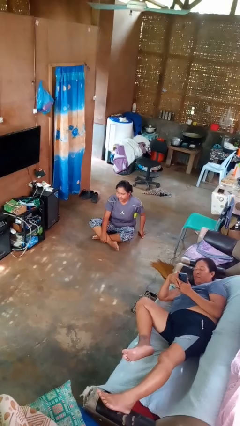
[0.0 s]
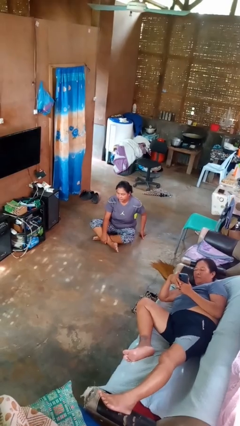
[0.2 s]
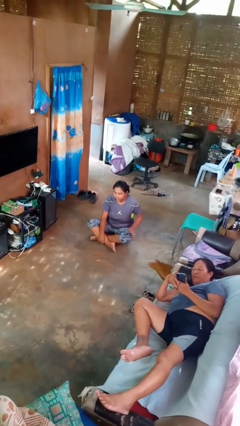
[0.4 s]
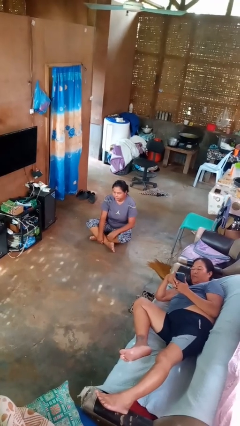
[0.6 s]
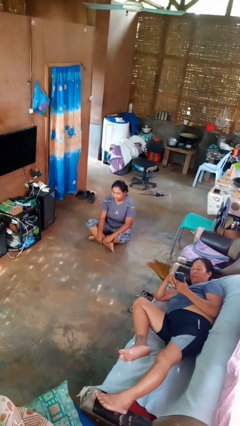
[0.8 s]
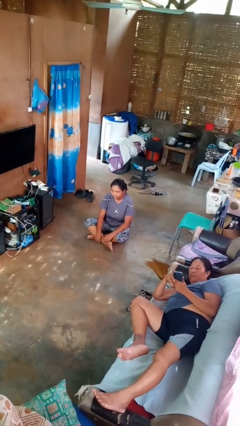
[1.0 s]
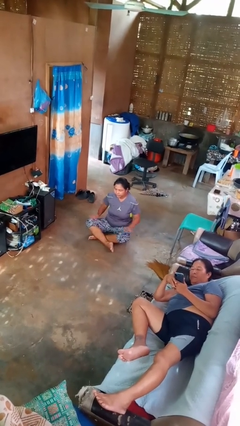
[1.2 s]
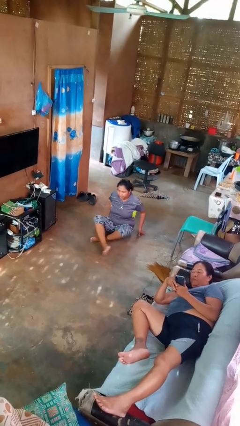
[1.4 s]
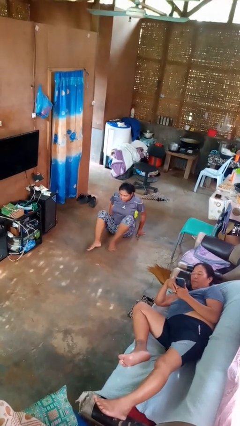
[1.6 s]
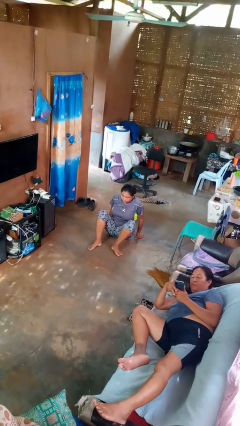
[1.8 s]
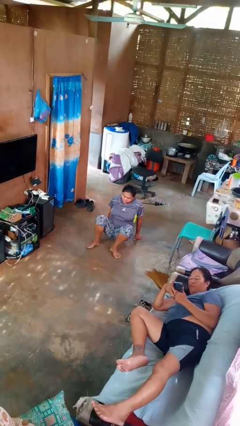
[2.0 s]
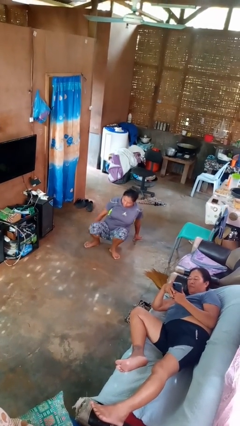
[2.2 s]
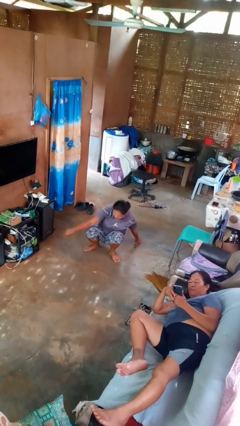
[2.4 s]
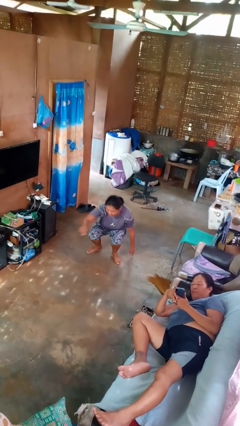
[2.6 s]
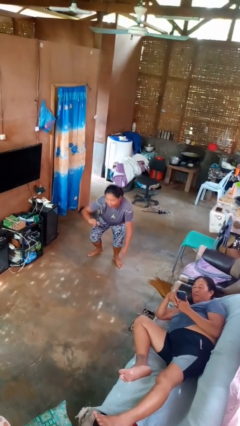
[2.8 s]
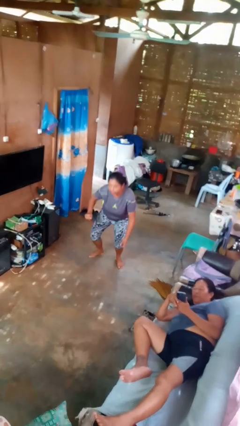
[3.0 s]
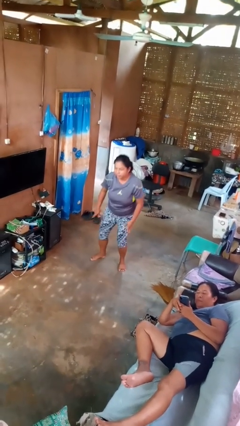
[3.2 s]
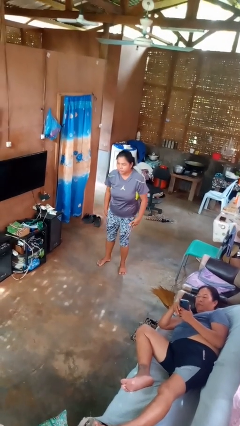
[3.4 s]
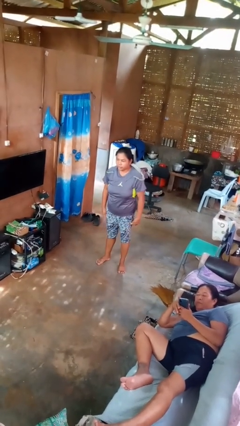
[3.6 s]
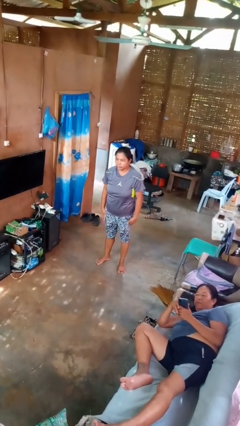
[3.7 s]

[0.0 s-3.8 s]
person stands up from floor

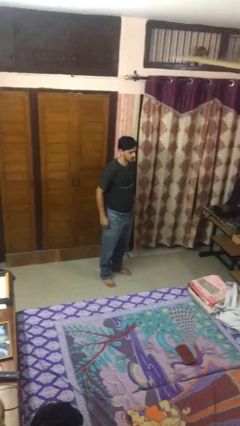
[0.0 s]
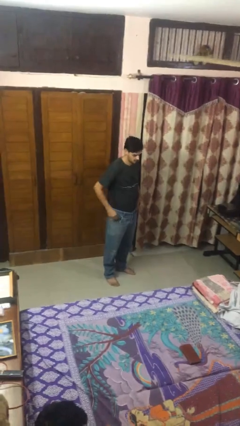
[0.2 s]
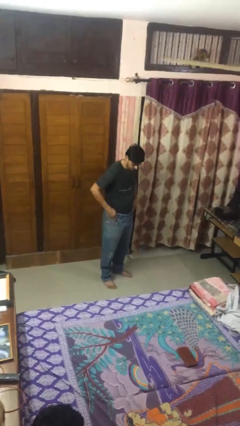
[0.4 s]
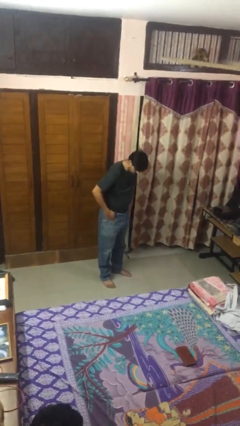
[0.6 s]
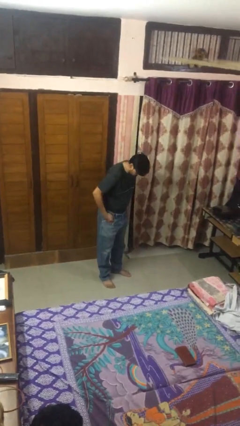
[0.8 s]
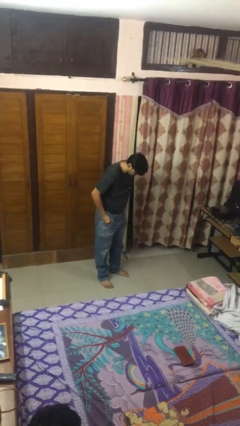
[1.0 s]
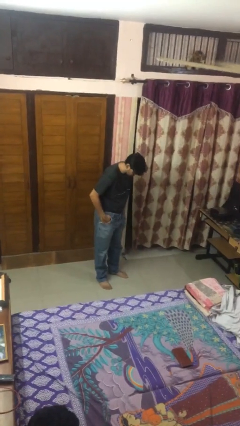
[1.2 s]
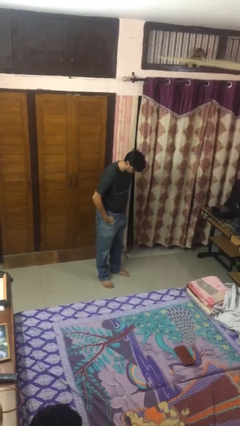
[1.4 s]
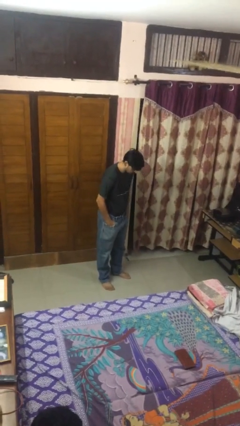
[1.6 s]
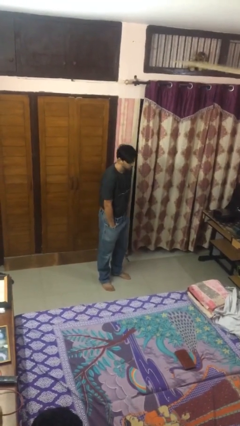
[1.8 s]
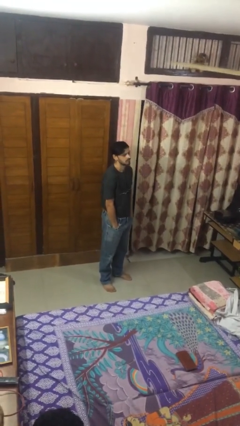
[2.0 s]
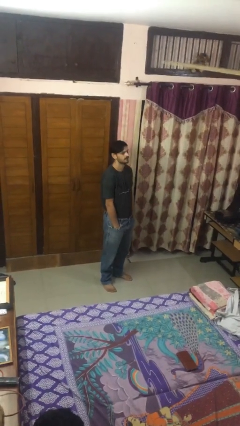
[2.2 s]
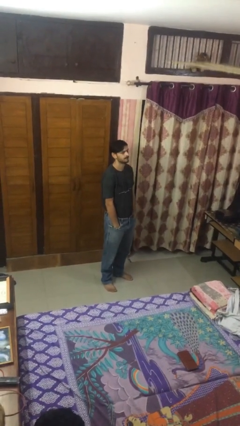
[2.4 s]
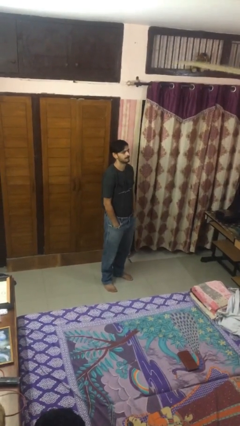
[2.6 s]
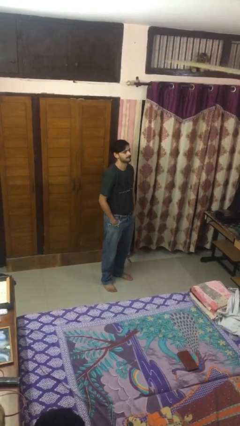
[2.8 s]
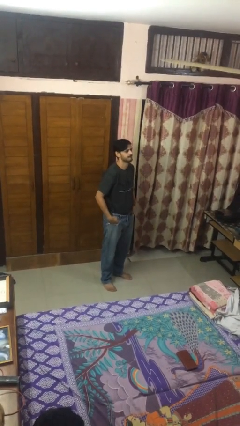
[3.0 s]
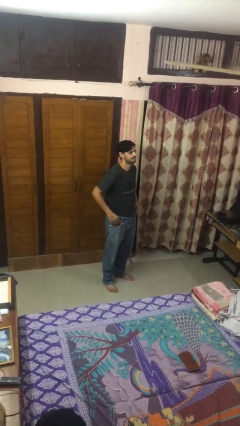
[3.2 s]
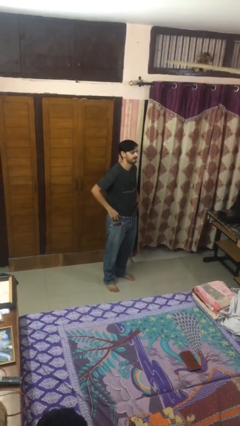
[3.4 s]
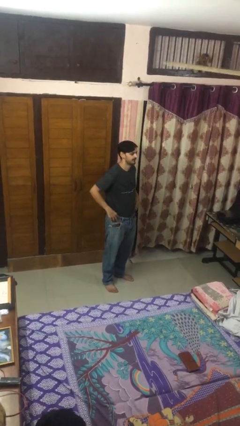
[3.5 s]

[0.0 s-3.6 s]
person puts hands in back pockets

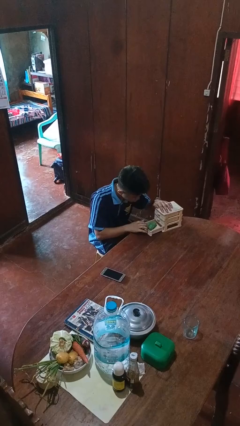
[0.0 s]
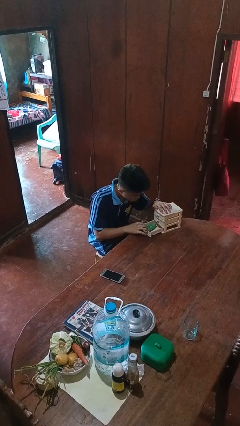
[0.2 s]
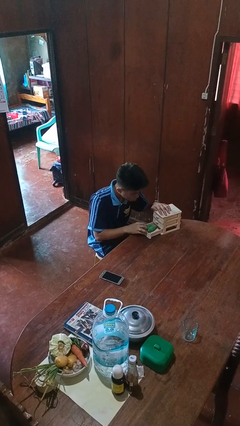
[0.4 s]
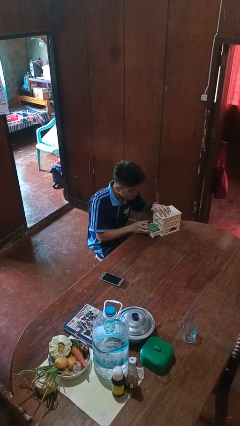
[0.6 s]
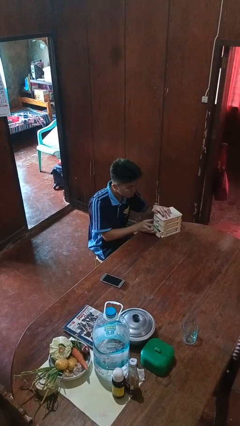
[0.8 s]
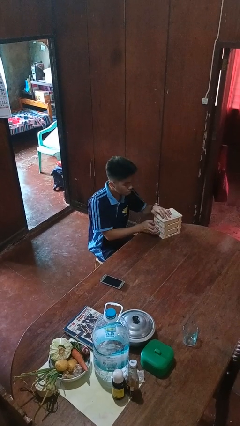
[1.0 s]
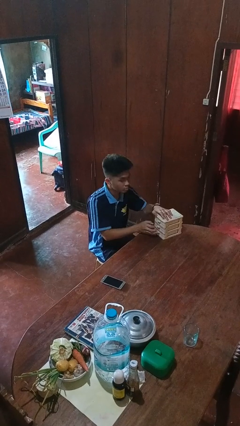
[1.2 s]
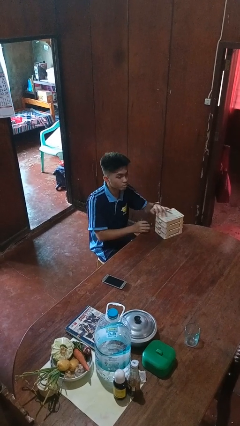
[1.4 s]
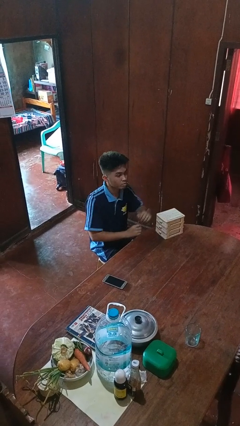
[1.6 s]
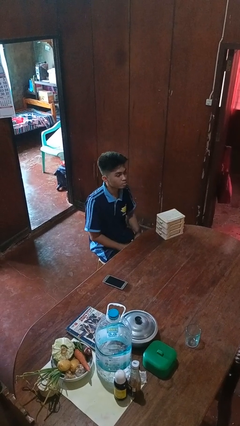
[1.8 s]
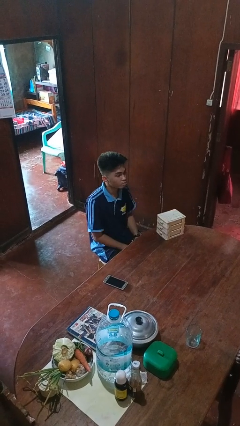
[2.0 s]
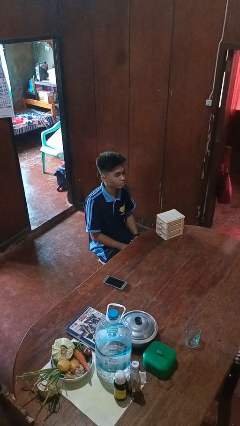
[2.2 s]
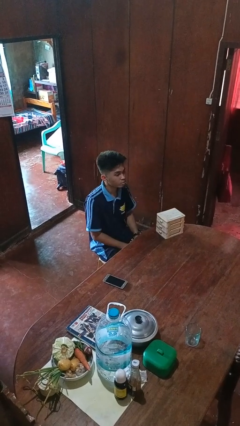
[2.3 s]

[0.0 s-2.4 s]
person closes jewelry box

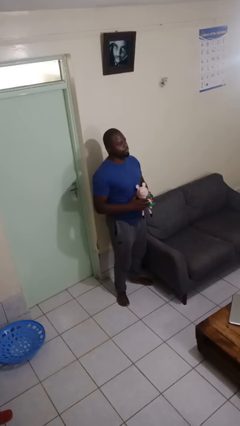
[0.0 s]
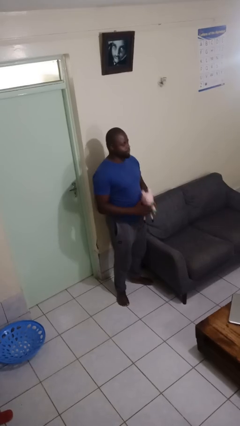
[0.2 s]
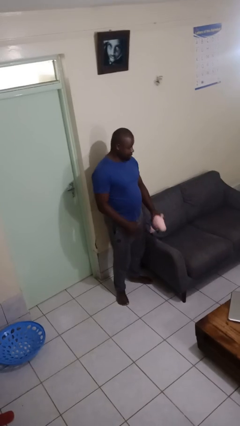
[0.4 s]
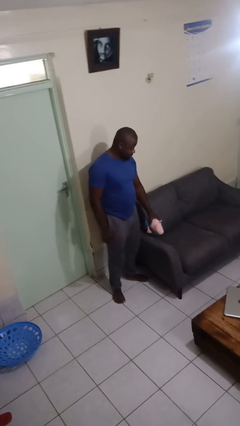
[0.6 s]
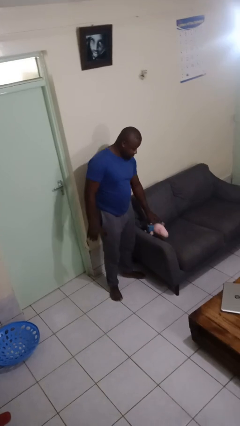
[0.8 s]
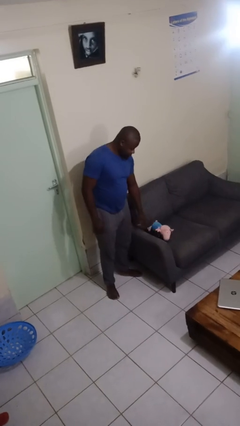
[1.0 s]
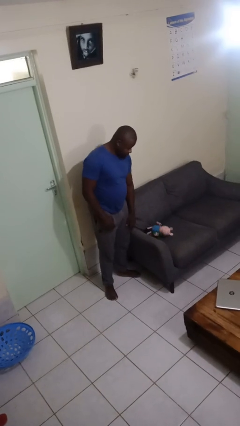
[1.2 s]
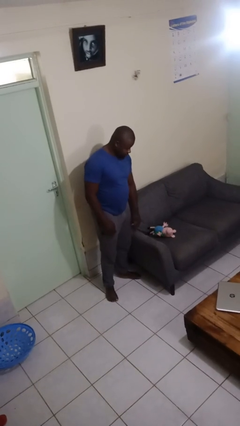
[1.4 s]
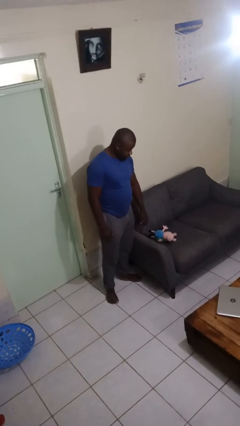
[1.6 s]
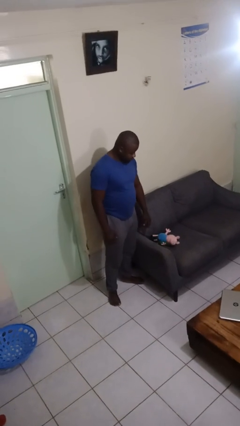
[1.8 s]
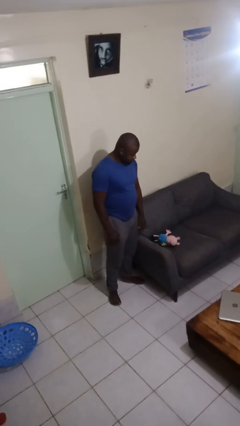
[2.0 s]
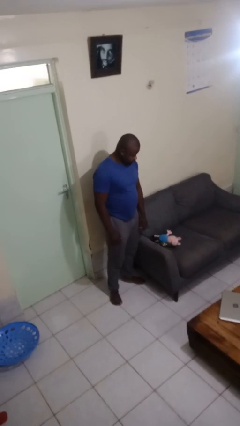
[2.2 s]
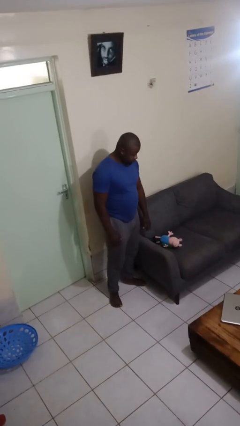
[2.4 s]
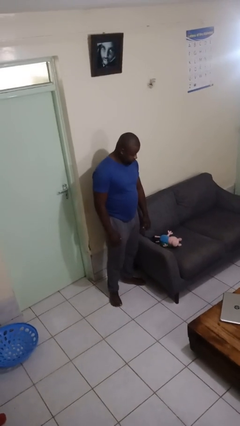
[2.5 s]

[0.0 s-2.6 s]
person puts down object on couch

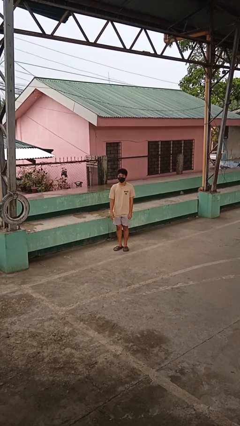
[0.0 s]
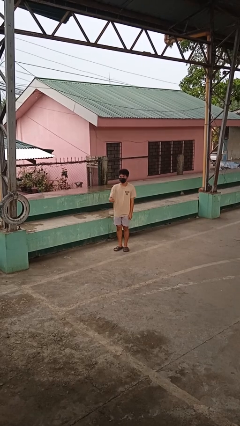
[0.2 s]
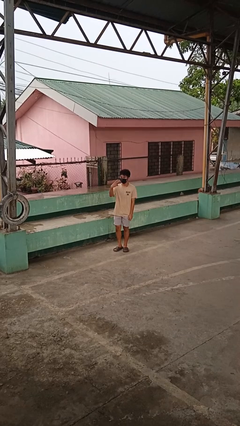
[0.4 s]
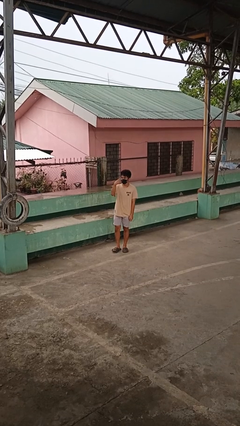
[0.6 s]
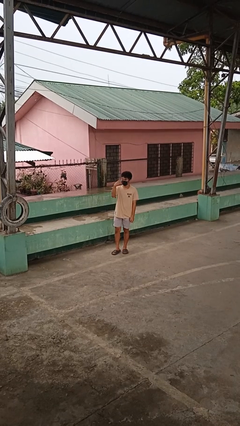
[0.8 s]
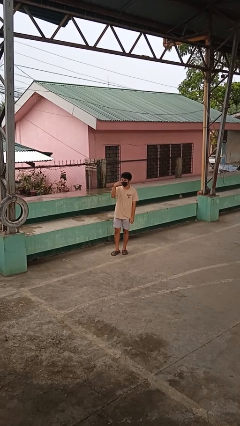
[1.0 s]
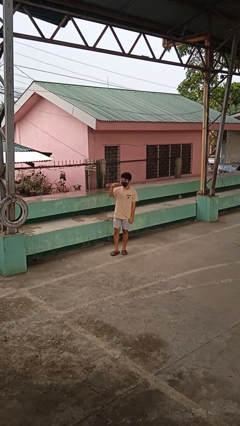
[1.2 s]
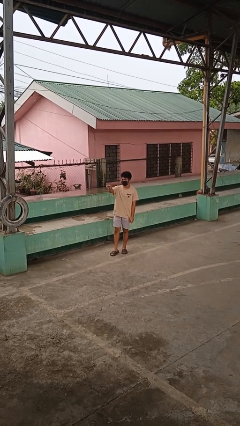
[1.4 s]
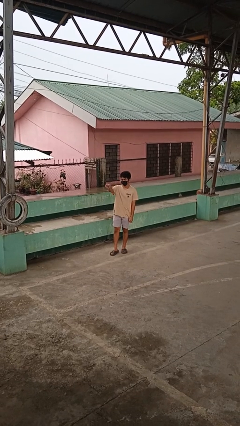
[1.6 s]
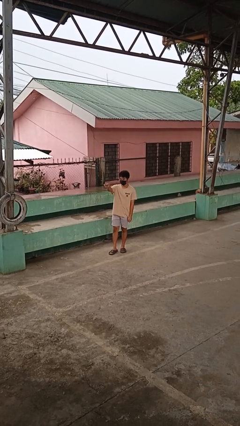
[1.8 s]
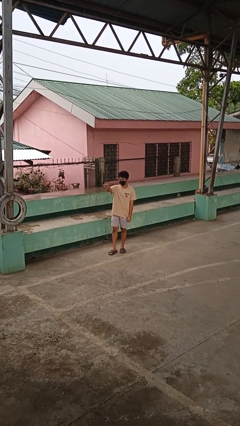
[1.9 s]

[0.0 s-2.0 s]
person gestures watch closely

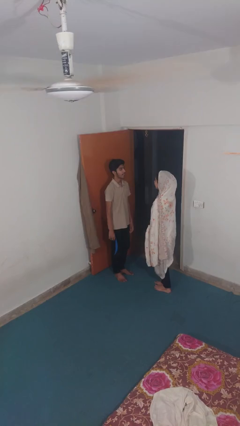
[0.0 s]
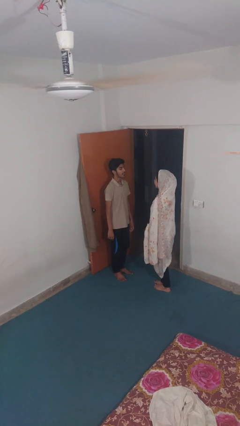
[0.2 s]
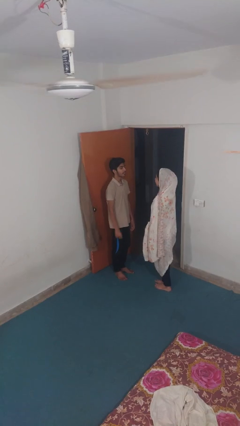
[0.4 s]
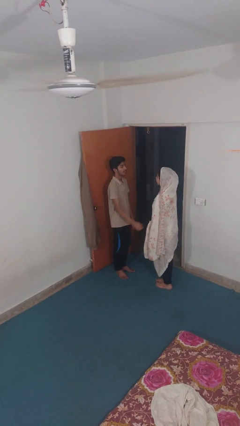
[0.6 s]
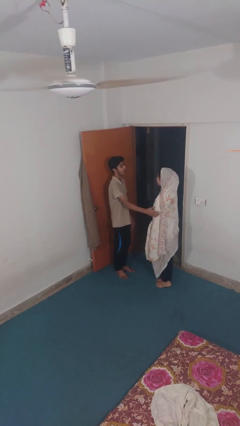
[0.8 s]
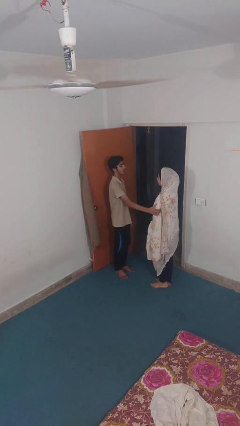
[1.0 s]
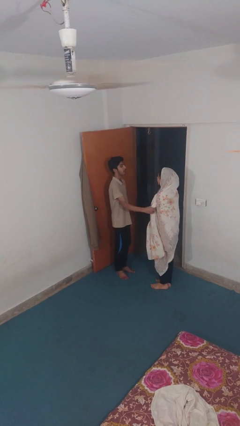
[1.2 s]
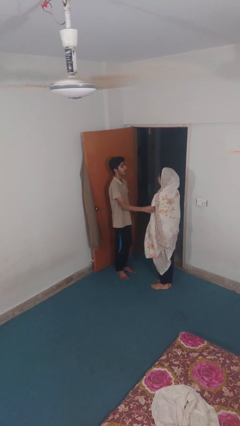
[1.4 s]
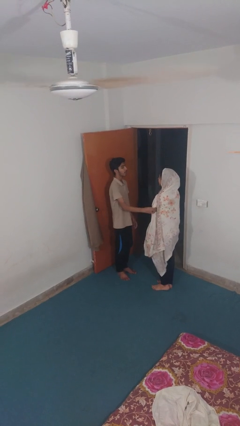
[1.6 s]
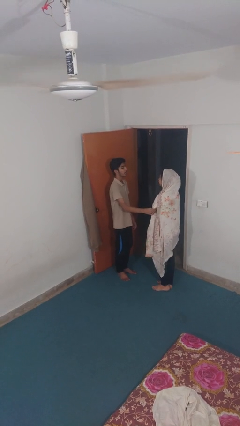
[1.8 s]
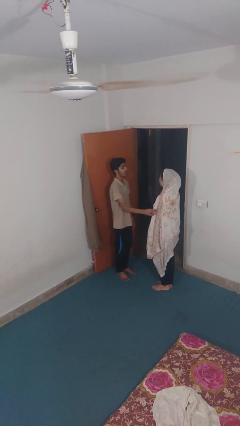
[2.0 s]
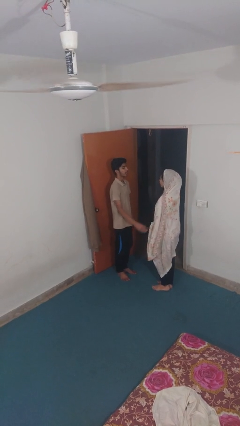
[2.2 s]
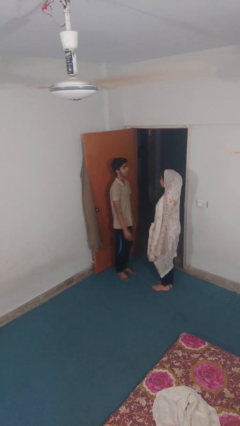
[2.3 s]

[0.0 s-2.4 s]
person grabs person by bicep

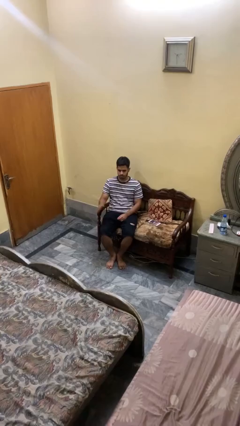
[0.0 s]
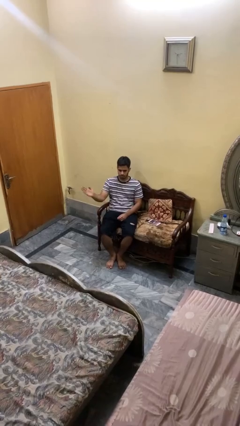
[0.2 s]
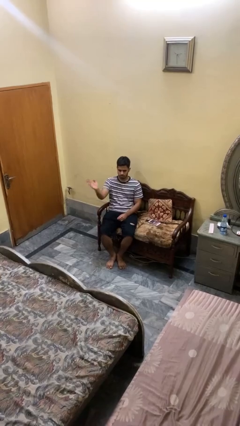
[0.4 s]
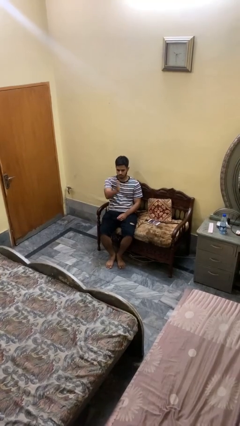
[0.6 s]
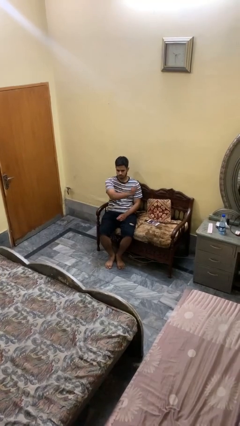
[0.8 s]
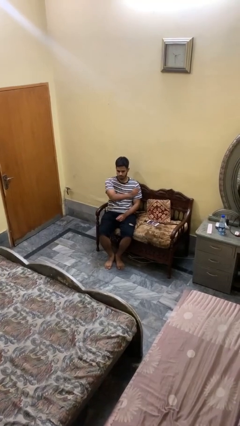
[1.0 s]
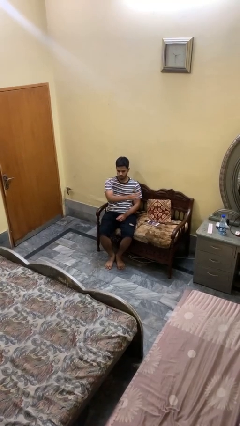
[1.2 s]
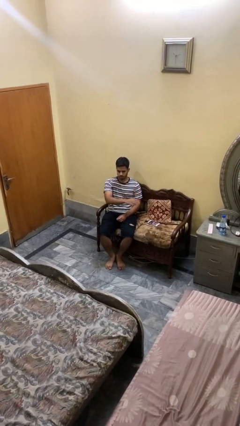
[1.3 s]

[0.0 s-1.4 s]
person gestures swipe left
